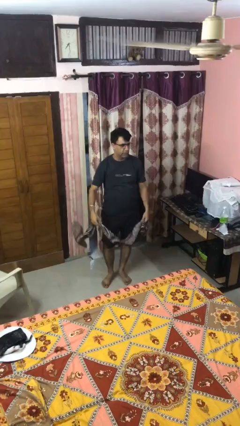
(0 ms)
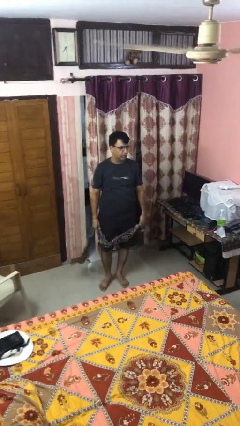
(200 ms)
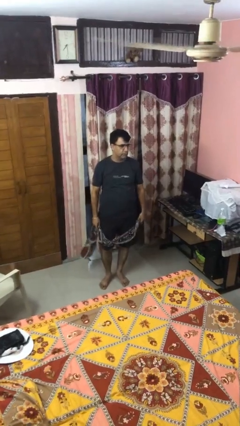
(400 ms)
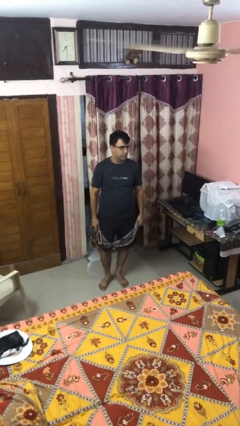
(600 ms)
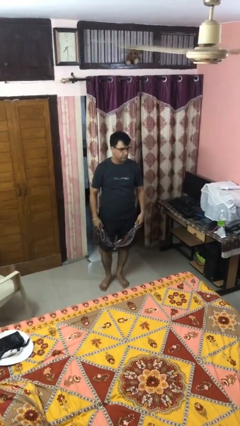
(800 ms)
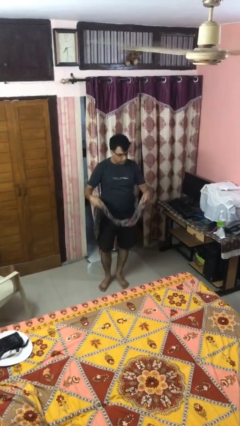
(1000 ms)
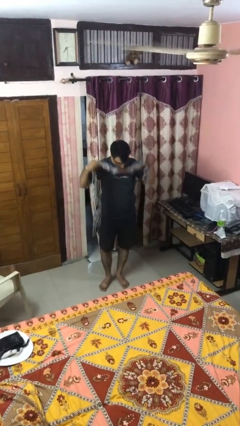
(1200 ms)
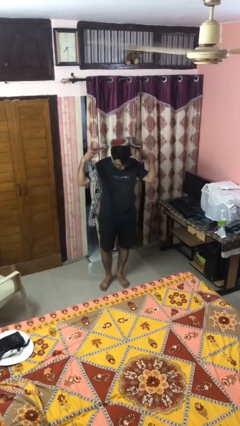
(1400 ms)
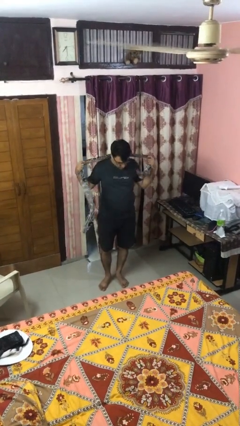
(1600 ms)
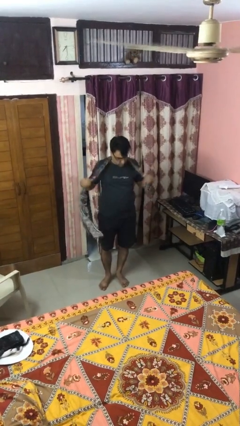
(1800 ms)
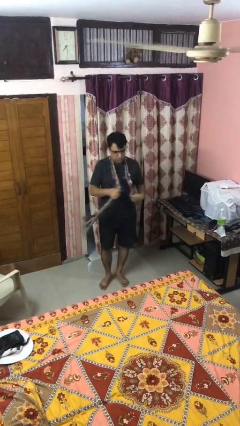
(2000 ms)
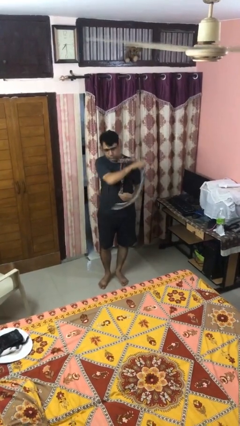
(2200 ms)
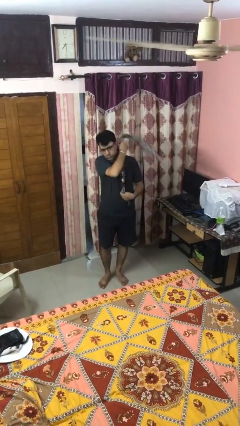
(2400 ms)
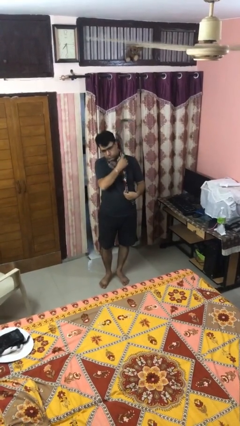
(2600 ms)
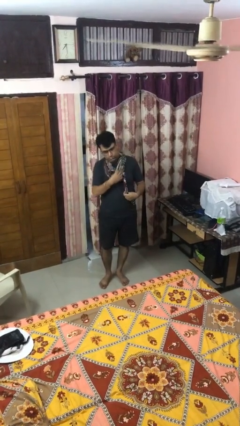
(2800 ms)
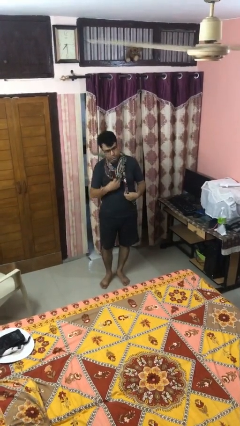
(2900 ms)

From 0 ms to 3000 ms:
person puts on scarf

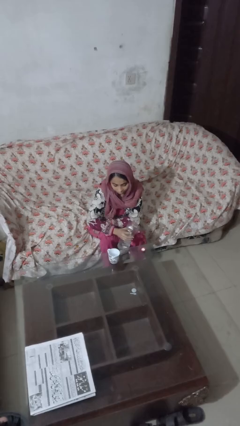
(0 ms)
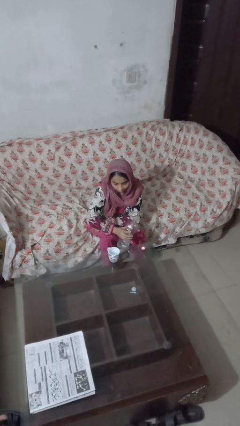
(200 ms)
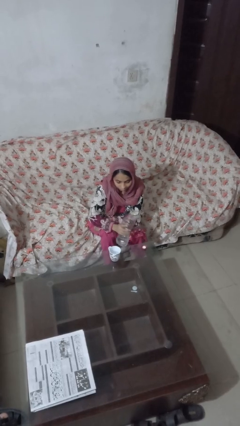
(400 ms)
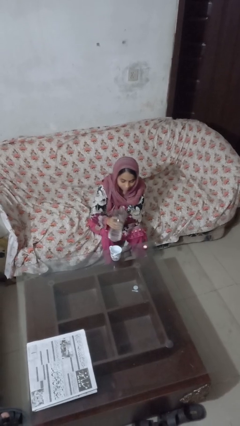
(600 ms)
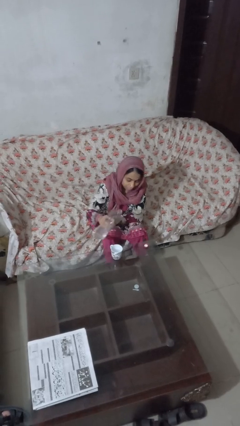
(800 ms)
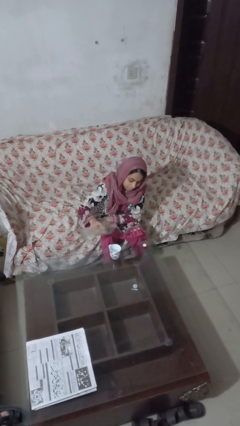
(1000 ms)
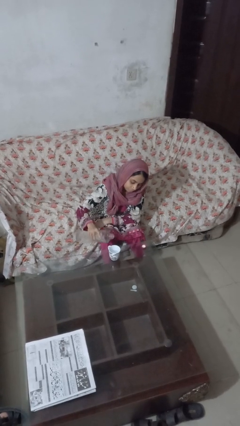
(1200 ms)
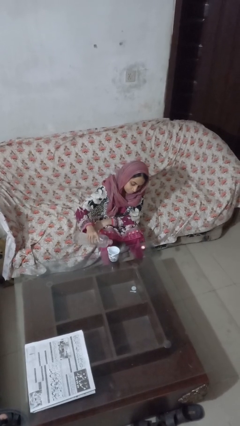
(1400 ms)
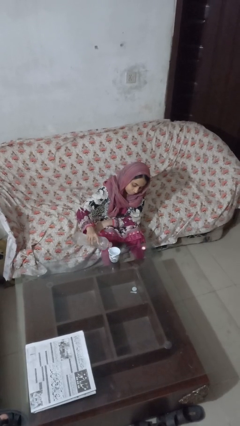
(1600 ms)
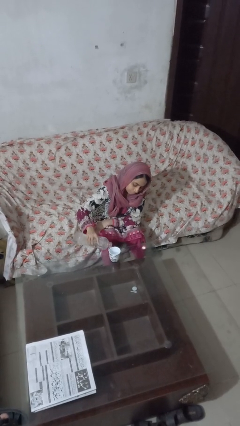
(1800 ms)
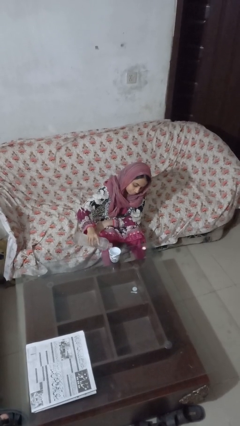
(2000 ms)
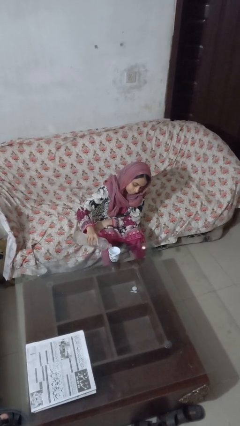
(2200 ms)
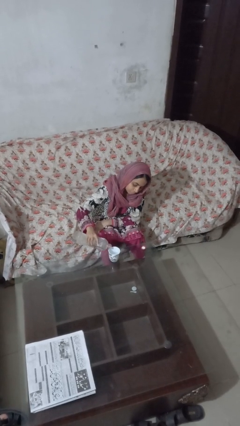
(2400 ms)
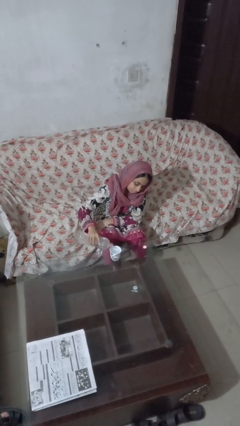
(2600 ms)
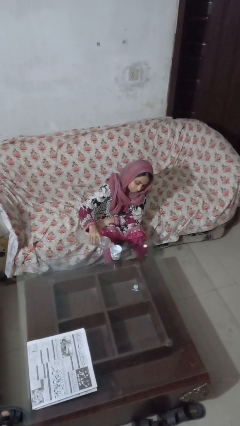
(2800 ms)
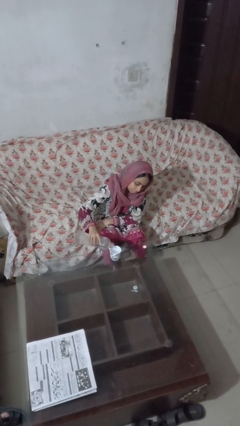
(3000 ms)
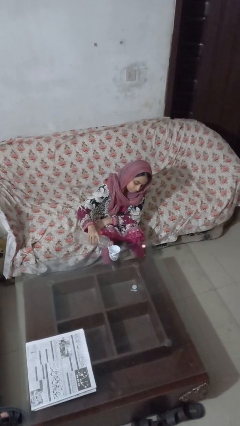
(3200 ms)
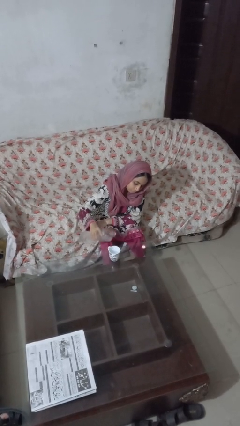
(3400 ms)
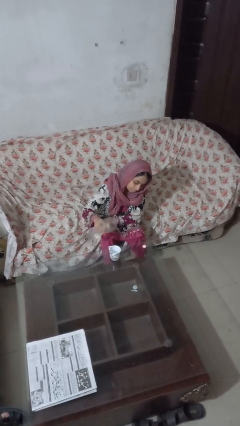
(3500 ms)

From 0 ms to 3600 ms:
person pours liquid into cup

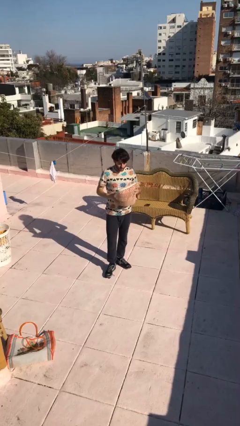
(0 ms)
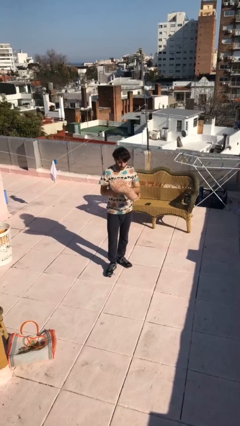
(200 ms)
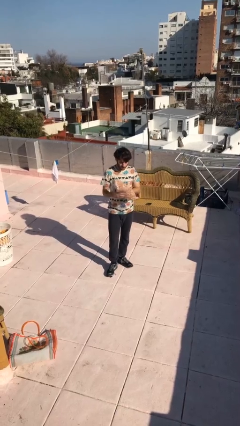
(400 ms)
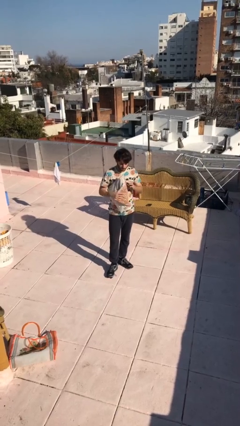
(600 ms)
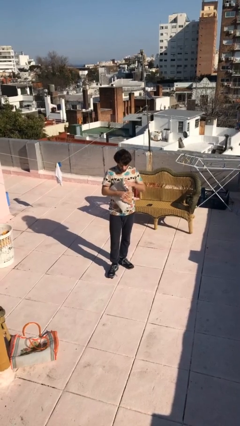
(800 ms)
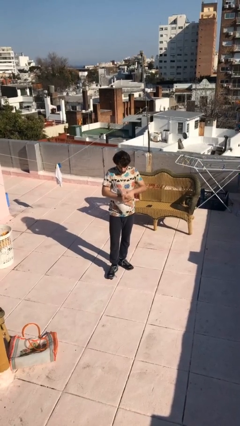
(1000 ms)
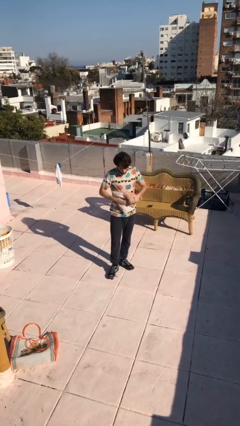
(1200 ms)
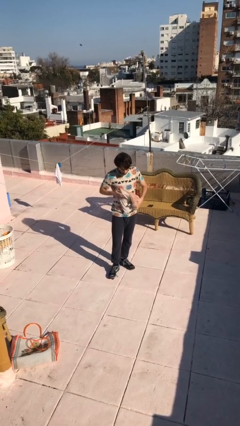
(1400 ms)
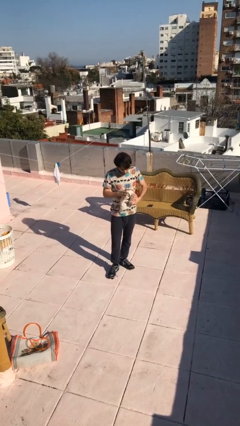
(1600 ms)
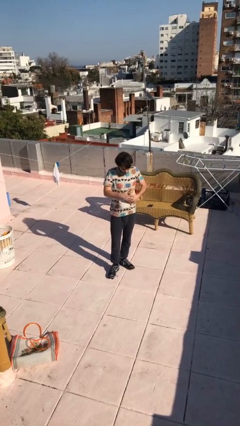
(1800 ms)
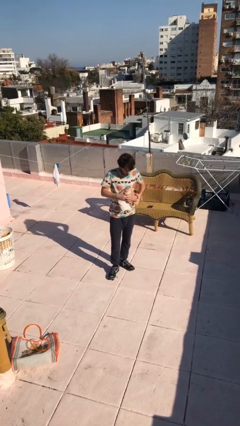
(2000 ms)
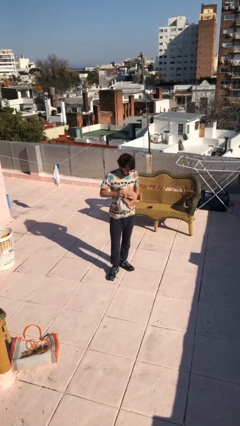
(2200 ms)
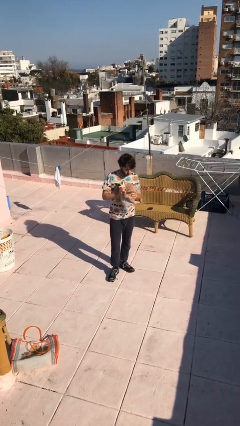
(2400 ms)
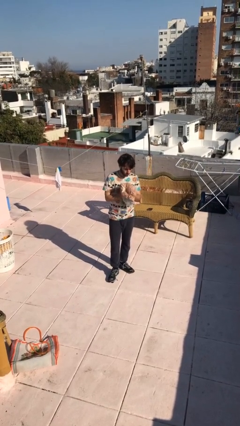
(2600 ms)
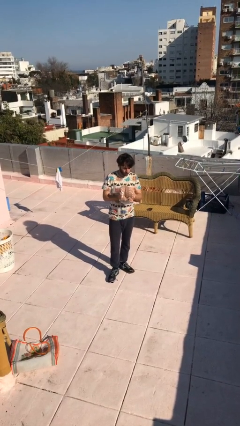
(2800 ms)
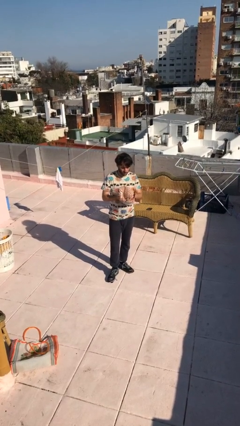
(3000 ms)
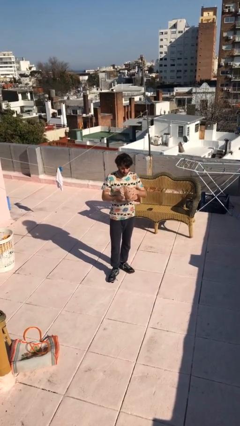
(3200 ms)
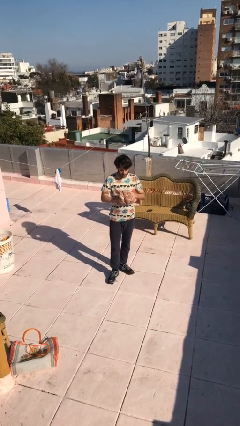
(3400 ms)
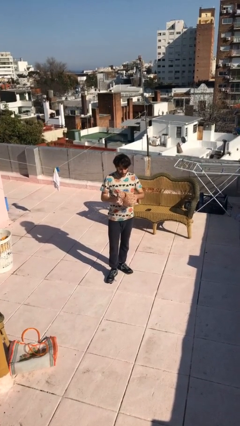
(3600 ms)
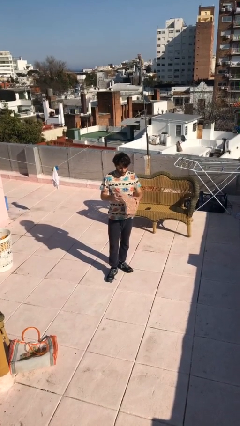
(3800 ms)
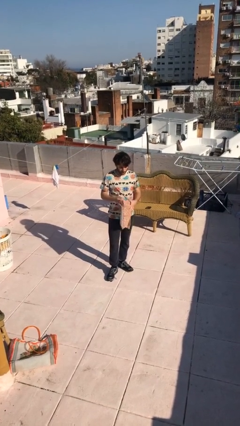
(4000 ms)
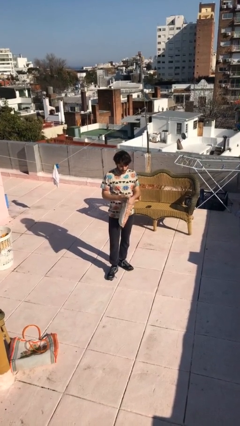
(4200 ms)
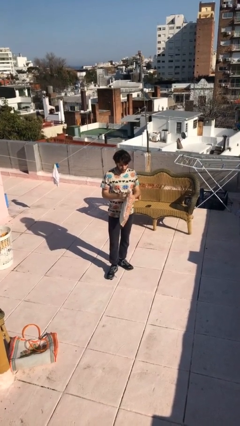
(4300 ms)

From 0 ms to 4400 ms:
person squeezes object

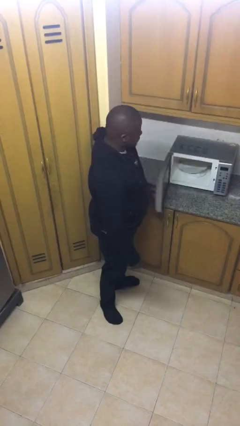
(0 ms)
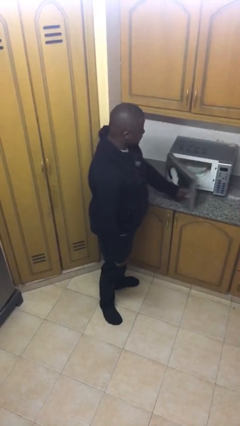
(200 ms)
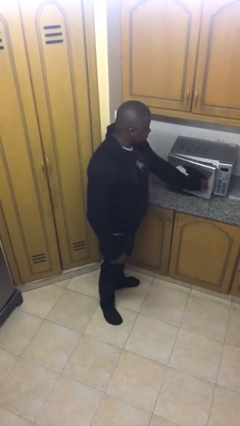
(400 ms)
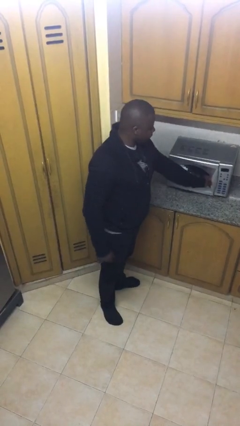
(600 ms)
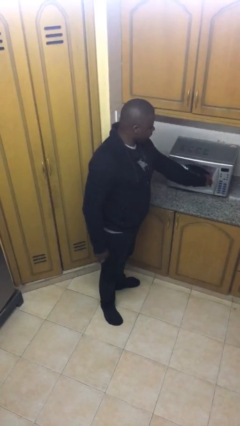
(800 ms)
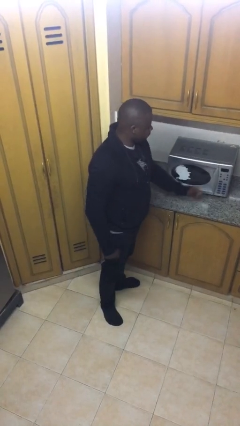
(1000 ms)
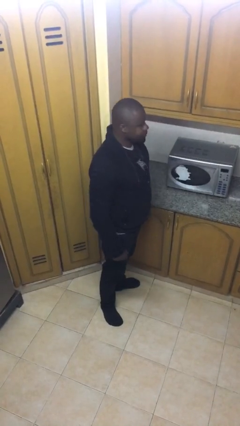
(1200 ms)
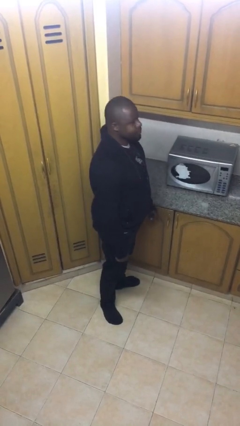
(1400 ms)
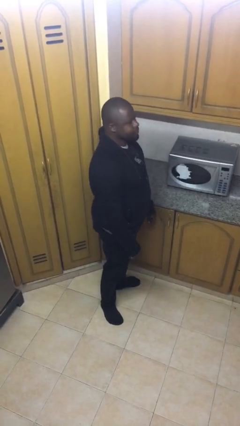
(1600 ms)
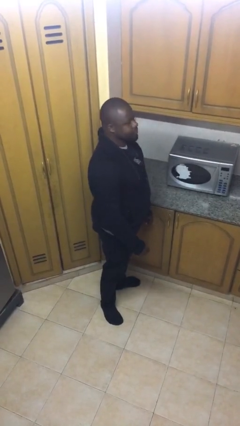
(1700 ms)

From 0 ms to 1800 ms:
person closes microwave

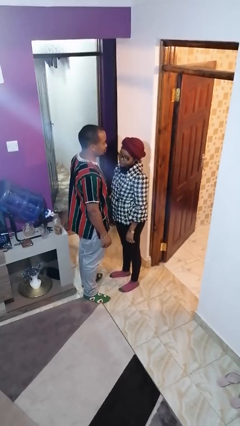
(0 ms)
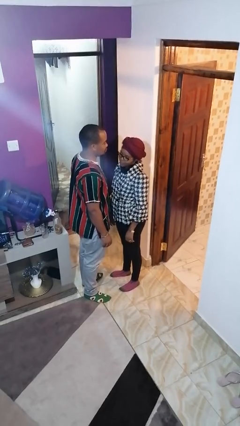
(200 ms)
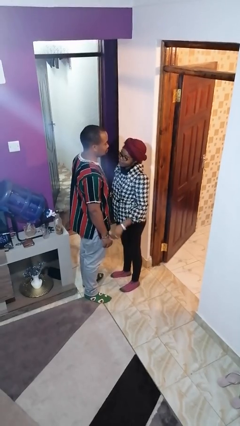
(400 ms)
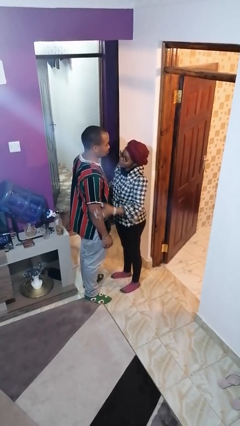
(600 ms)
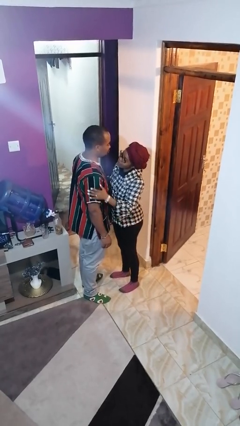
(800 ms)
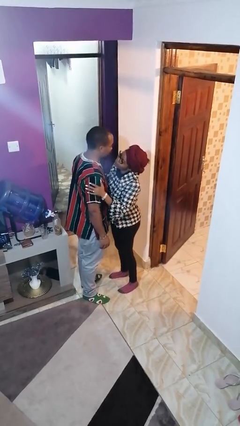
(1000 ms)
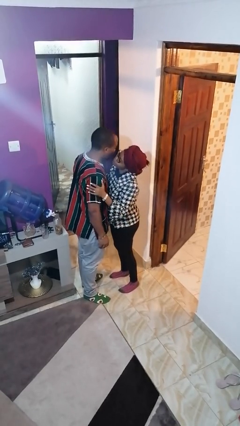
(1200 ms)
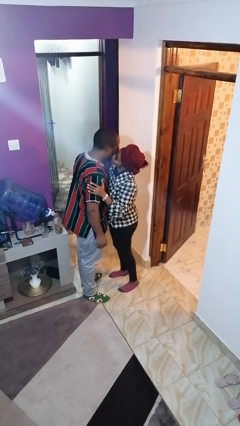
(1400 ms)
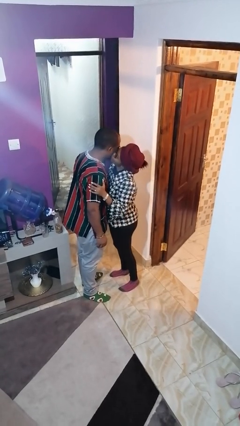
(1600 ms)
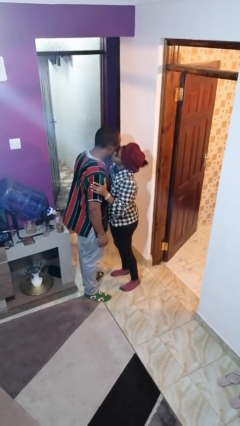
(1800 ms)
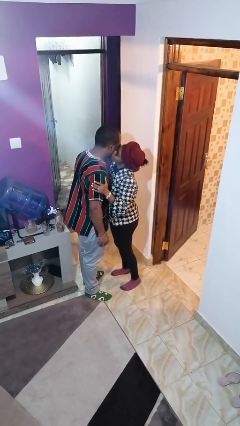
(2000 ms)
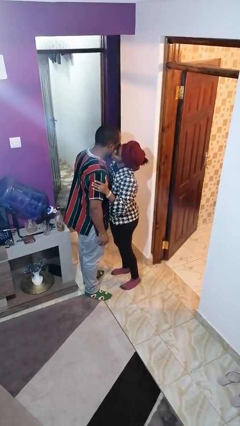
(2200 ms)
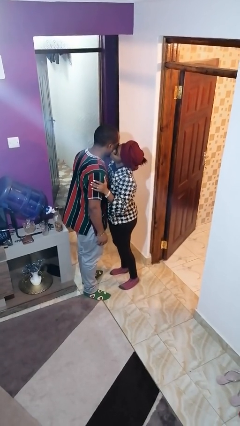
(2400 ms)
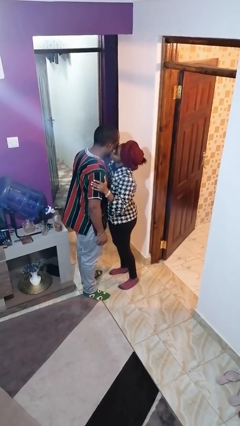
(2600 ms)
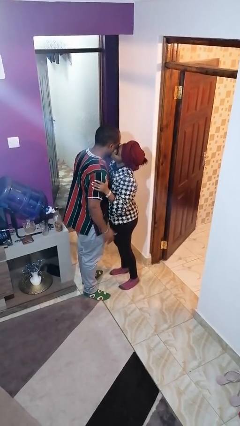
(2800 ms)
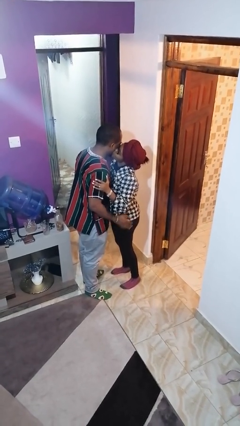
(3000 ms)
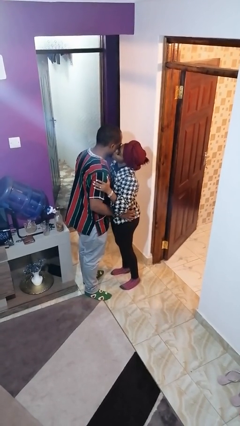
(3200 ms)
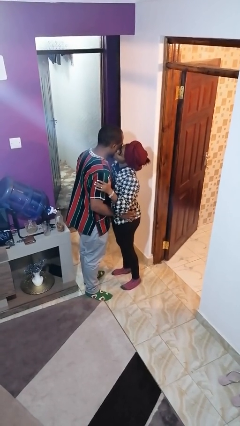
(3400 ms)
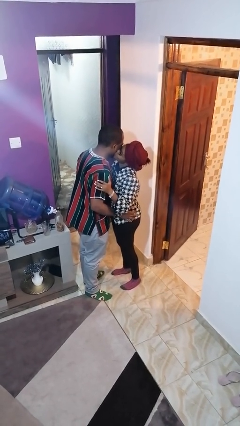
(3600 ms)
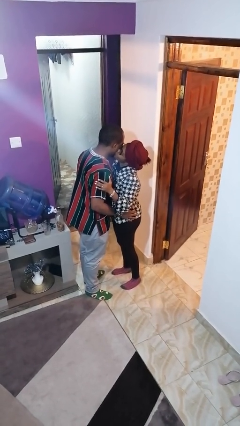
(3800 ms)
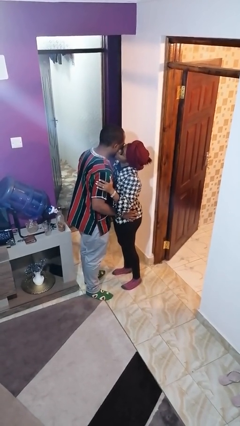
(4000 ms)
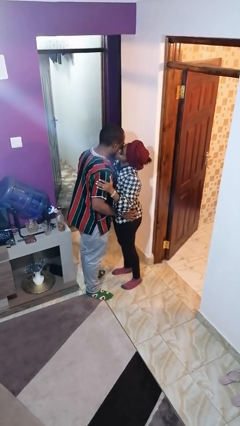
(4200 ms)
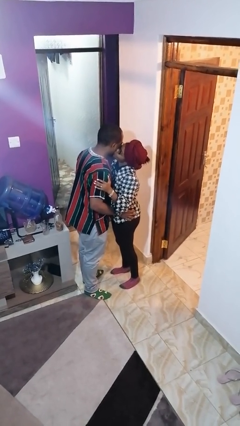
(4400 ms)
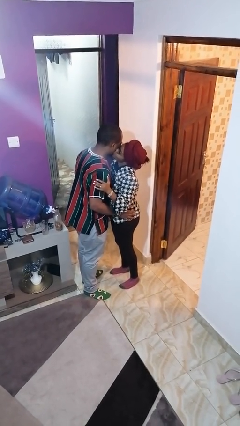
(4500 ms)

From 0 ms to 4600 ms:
person kisses cheek of person

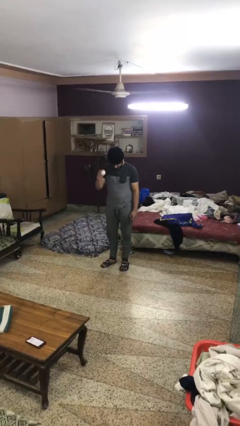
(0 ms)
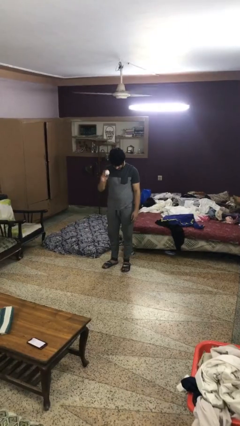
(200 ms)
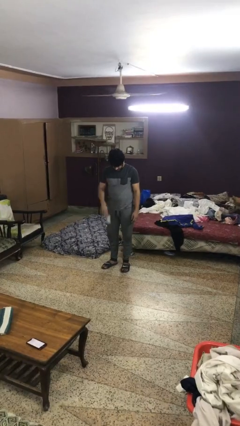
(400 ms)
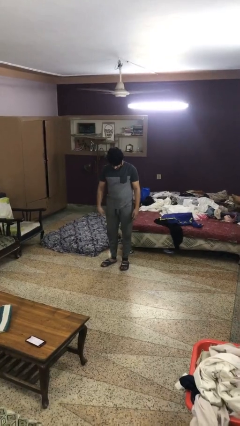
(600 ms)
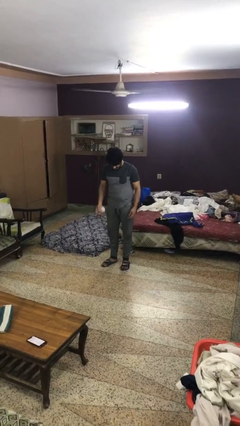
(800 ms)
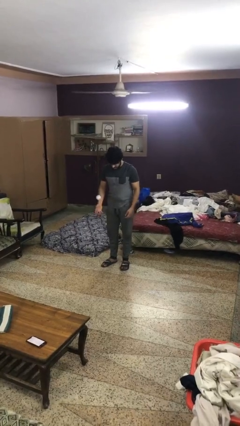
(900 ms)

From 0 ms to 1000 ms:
person bounces ball on floor
